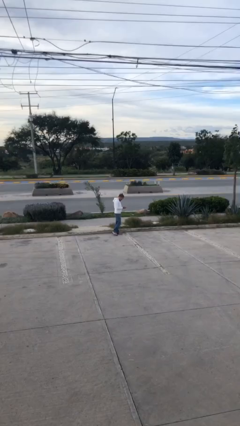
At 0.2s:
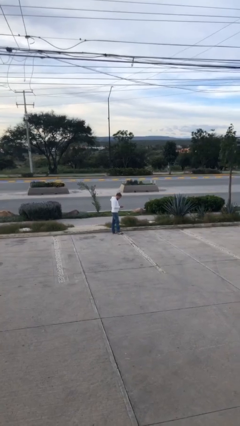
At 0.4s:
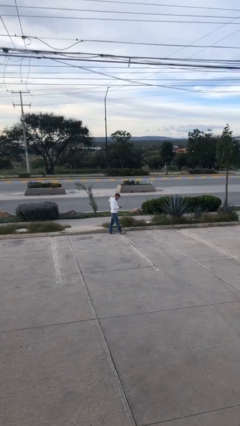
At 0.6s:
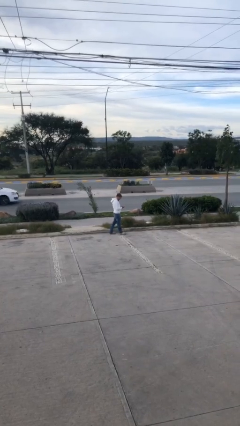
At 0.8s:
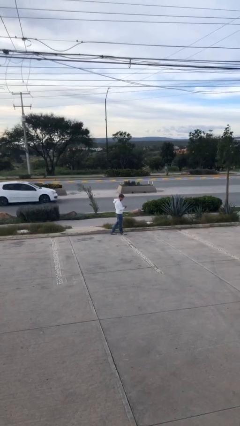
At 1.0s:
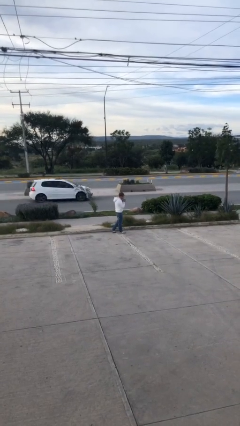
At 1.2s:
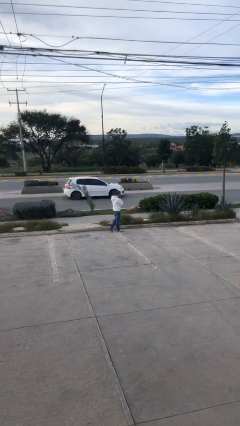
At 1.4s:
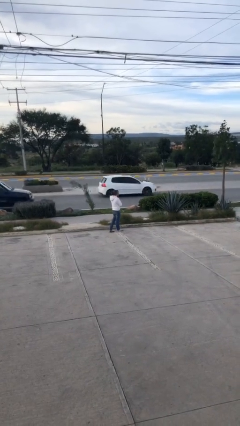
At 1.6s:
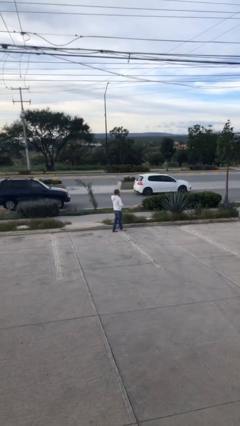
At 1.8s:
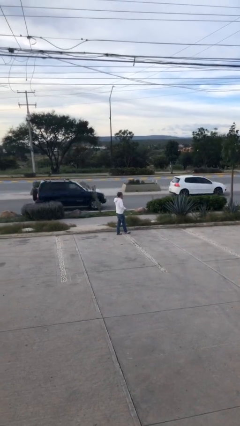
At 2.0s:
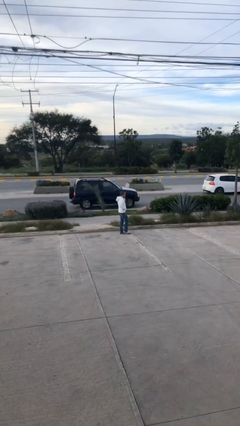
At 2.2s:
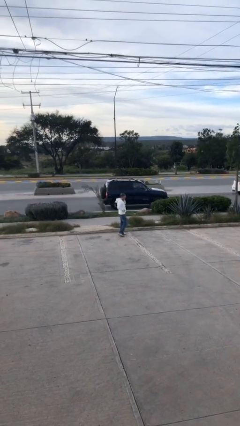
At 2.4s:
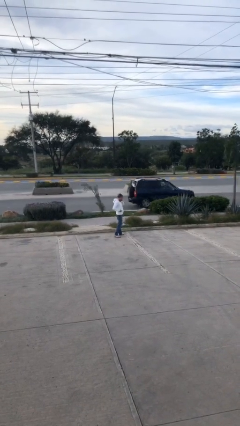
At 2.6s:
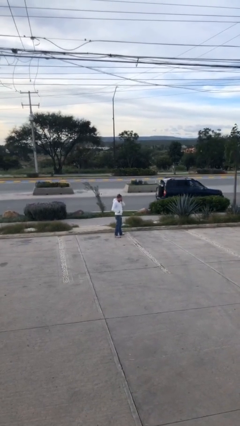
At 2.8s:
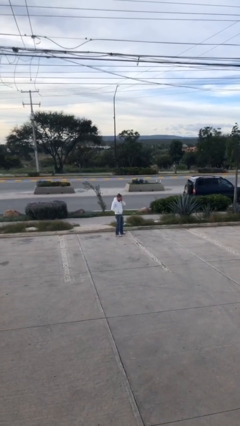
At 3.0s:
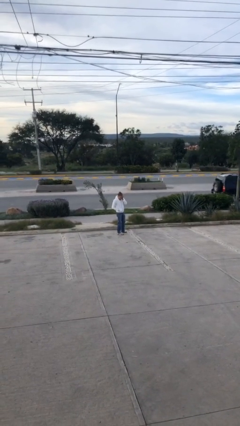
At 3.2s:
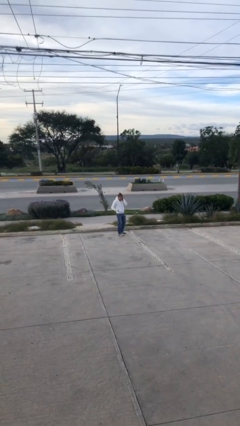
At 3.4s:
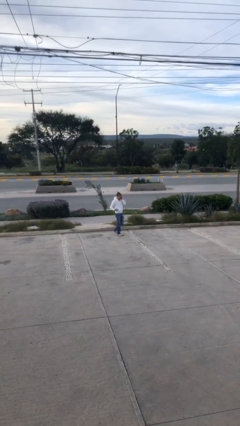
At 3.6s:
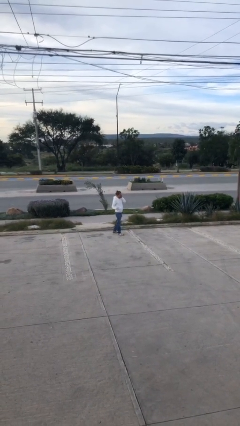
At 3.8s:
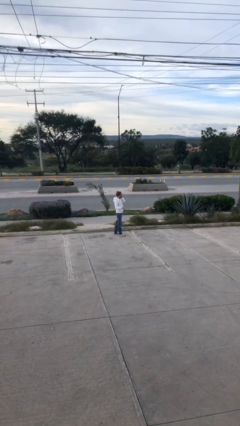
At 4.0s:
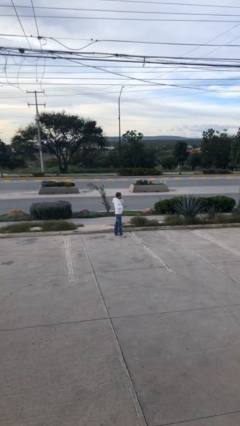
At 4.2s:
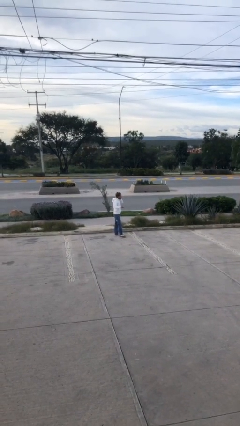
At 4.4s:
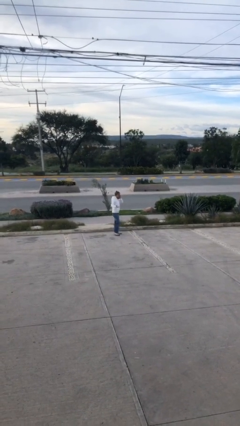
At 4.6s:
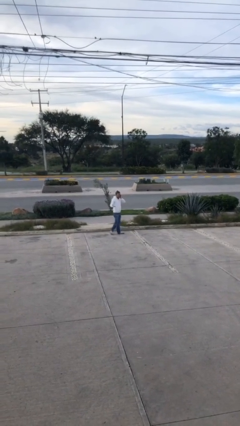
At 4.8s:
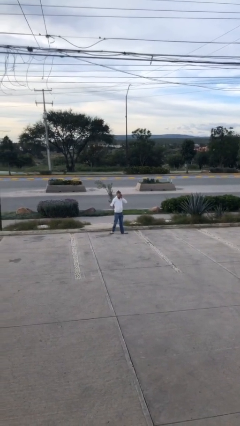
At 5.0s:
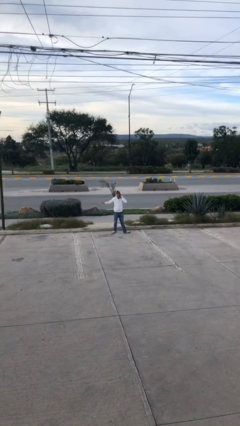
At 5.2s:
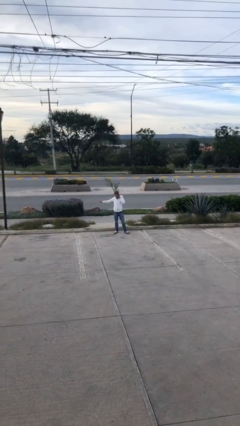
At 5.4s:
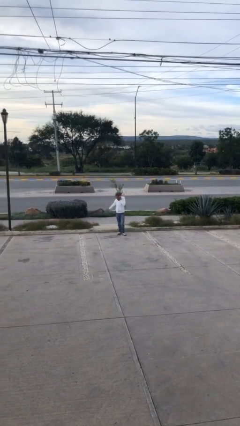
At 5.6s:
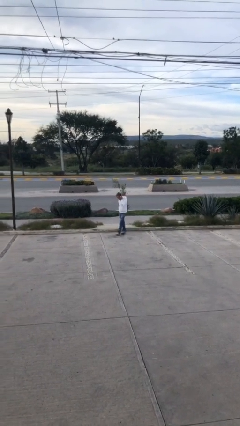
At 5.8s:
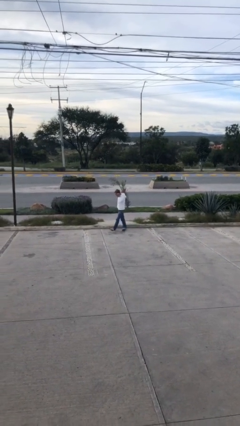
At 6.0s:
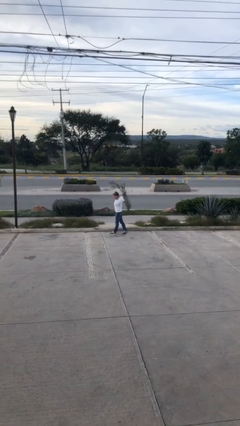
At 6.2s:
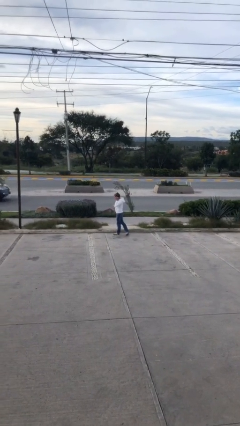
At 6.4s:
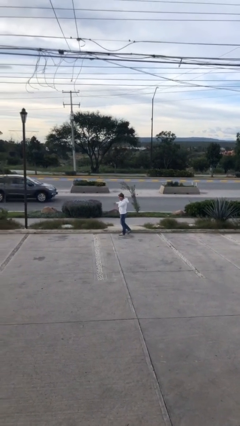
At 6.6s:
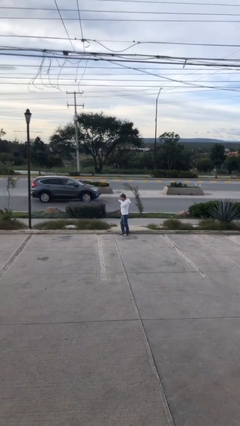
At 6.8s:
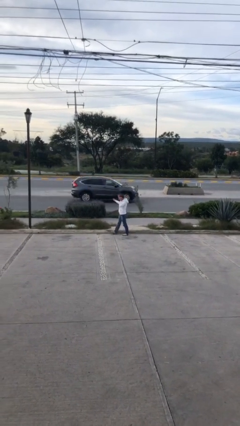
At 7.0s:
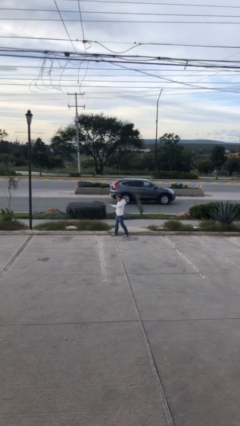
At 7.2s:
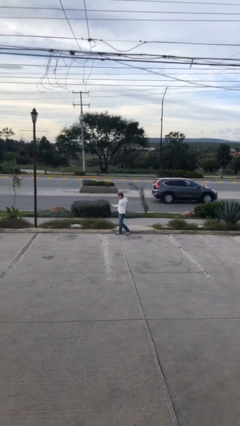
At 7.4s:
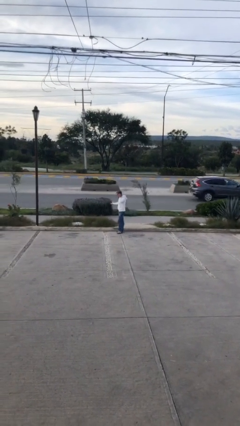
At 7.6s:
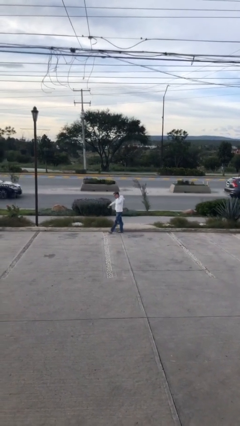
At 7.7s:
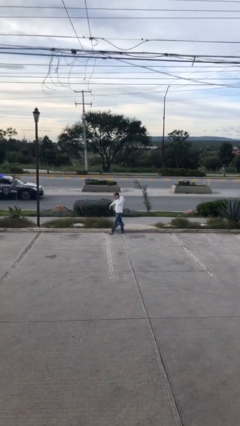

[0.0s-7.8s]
person talks on phone

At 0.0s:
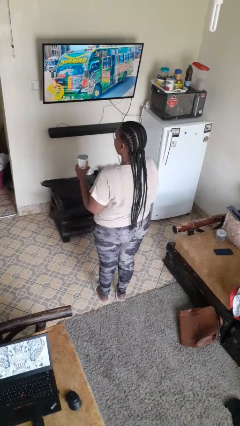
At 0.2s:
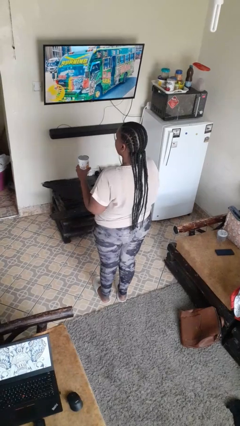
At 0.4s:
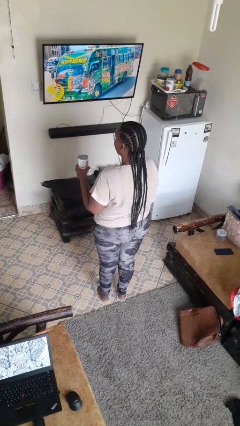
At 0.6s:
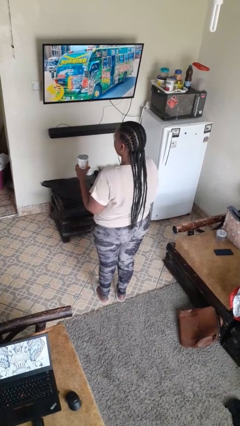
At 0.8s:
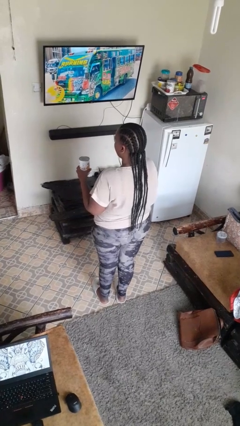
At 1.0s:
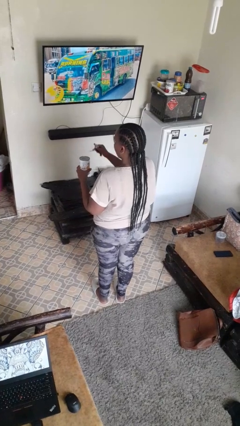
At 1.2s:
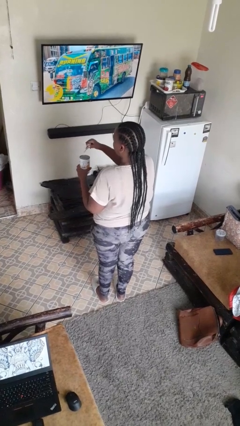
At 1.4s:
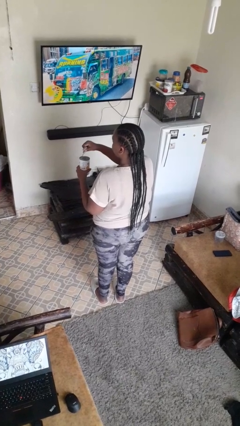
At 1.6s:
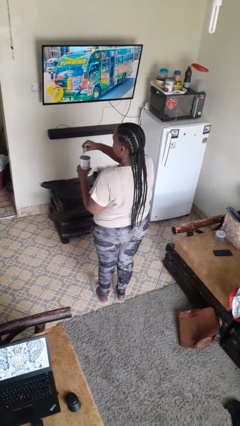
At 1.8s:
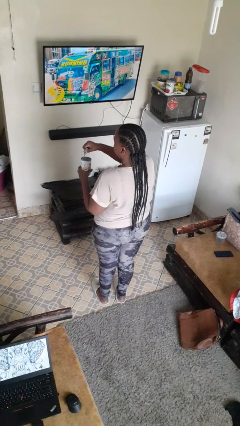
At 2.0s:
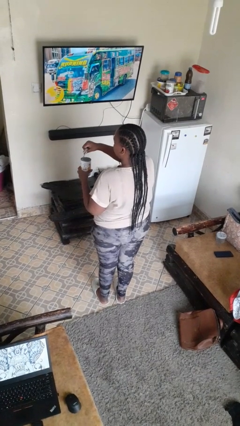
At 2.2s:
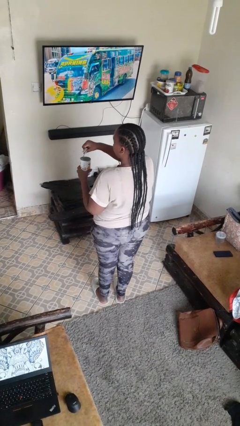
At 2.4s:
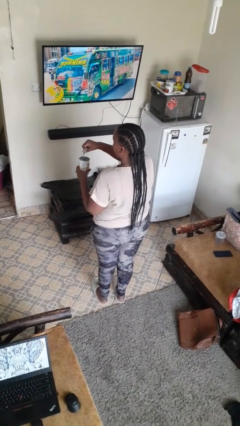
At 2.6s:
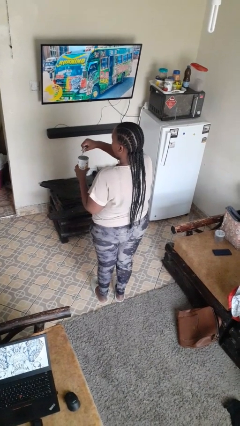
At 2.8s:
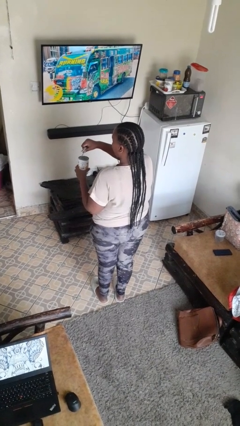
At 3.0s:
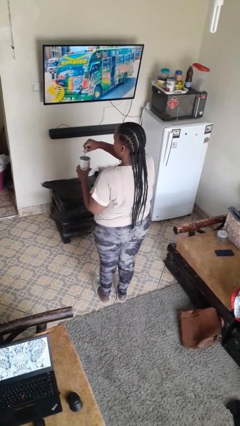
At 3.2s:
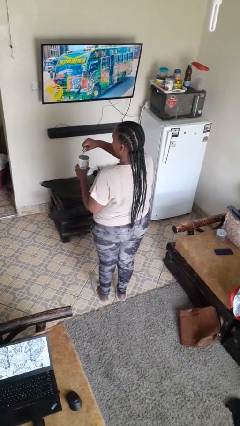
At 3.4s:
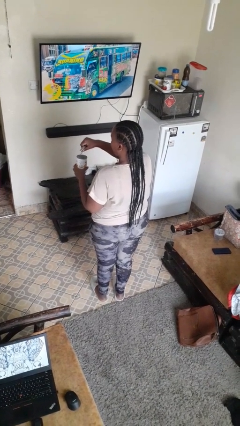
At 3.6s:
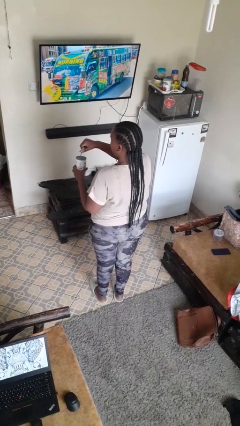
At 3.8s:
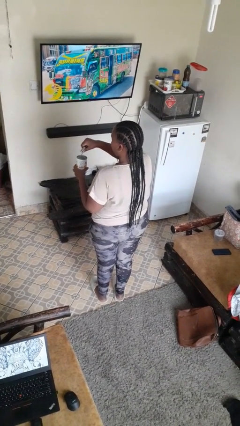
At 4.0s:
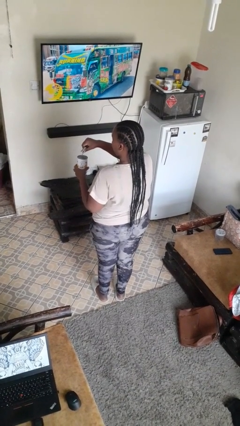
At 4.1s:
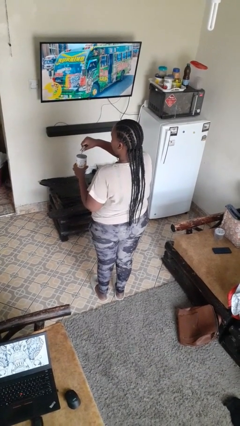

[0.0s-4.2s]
person opens can with can opener

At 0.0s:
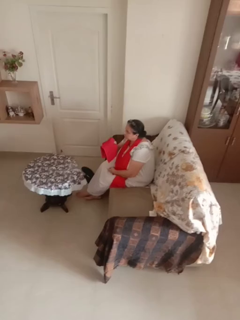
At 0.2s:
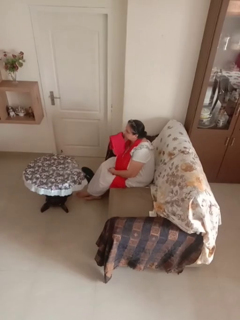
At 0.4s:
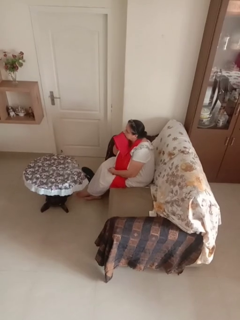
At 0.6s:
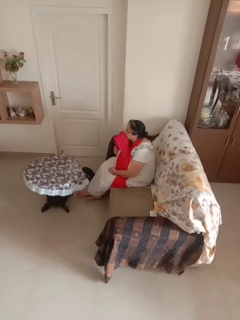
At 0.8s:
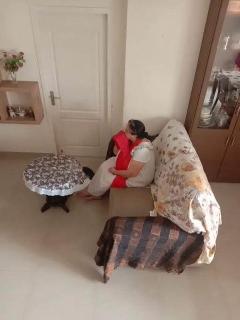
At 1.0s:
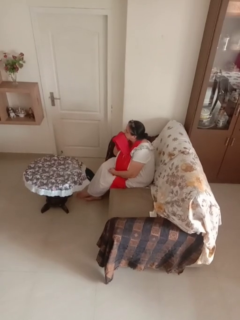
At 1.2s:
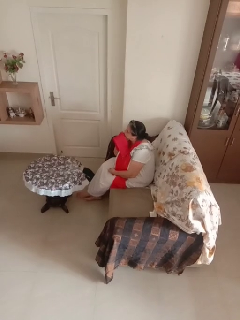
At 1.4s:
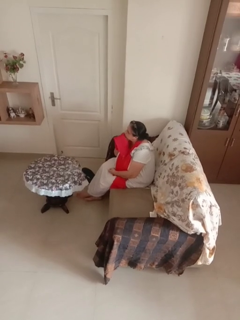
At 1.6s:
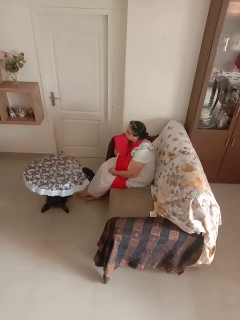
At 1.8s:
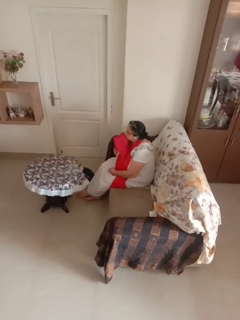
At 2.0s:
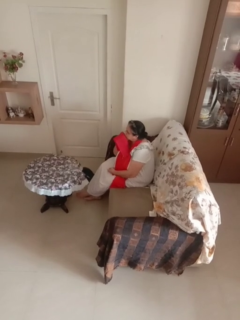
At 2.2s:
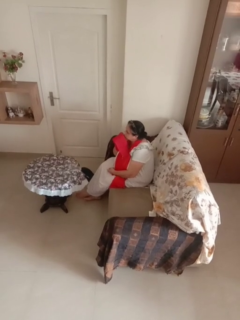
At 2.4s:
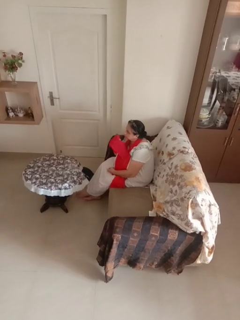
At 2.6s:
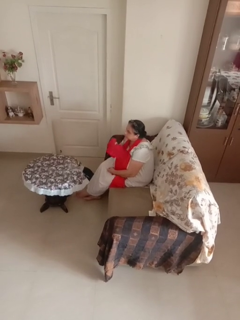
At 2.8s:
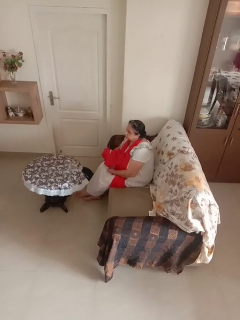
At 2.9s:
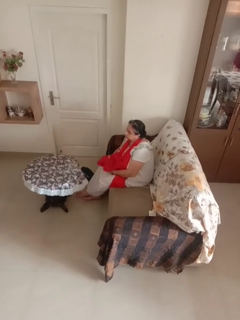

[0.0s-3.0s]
person wipes mouth with napkin

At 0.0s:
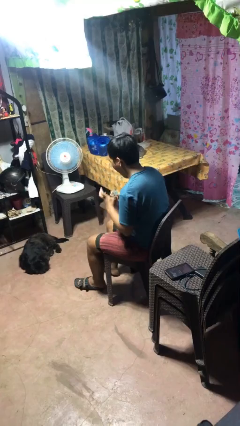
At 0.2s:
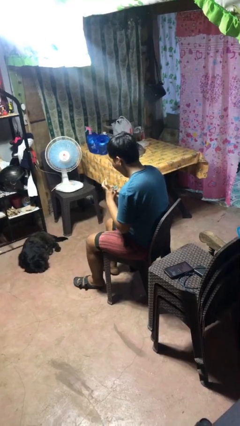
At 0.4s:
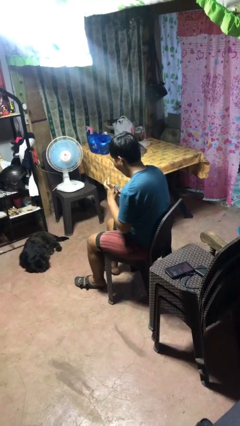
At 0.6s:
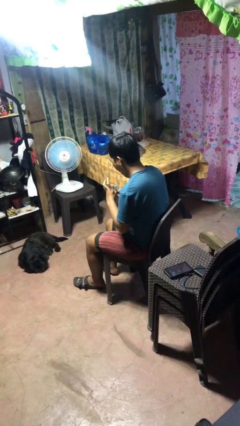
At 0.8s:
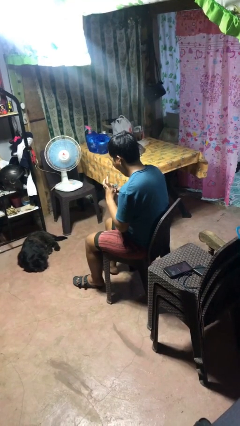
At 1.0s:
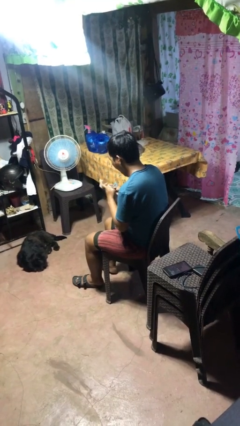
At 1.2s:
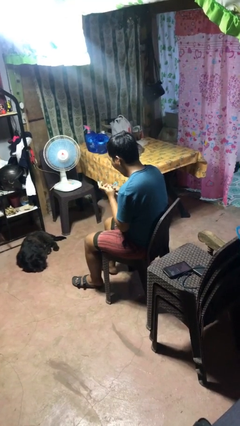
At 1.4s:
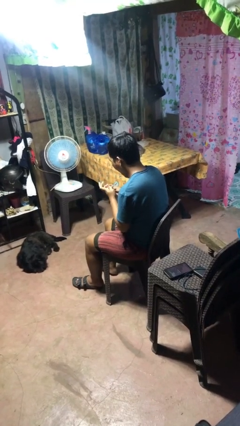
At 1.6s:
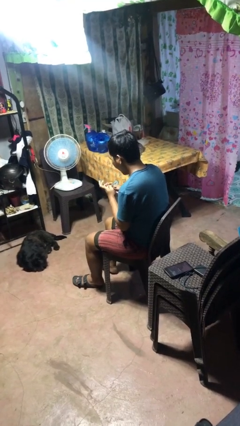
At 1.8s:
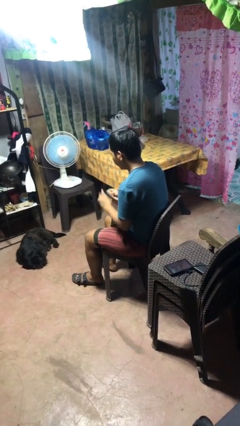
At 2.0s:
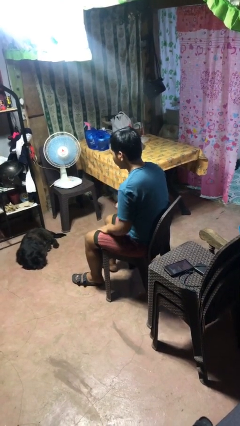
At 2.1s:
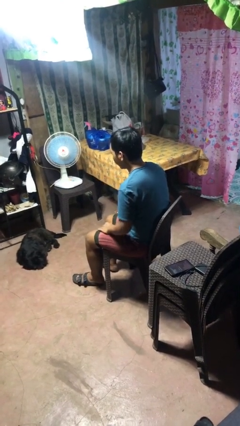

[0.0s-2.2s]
person files fingernails

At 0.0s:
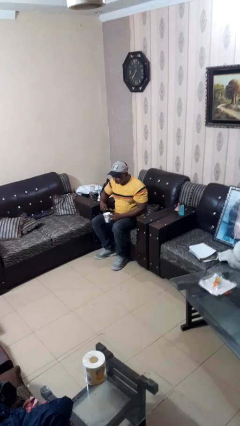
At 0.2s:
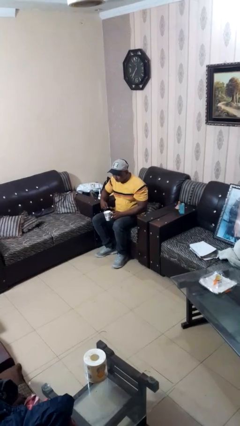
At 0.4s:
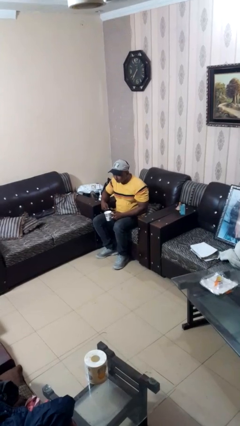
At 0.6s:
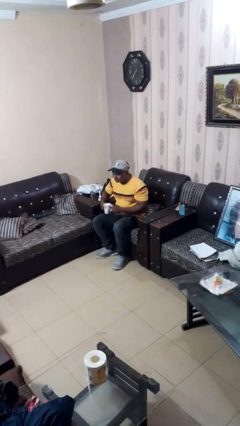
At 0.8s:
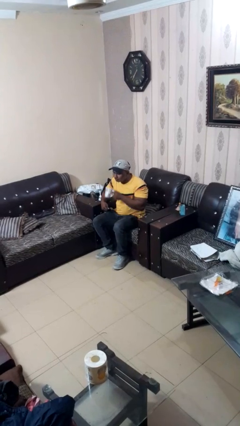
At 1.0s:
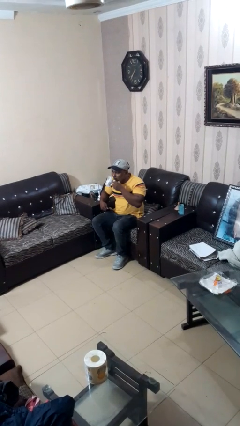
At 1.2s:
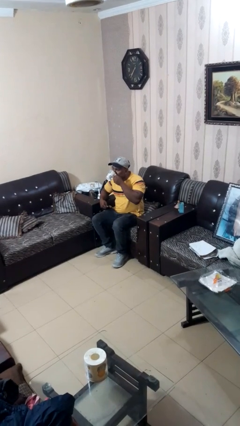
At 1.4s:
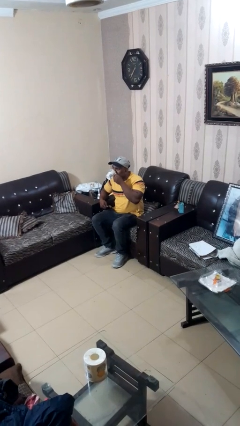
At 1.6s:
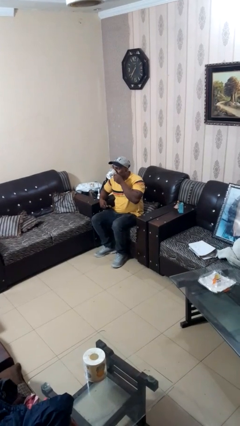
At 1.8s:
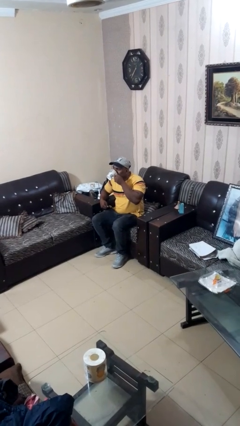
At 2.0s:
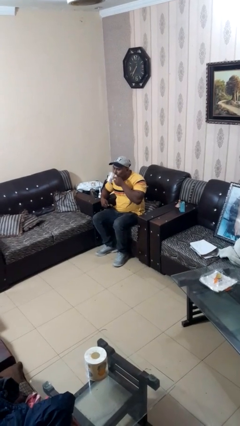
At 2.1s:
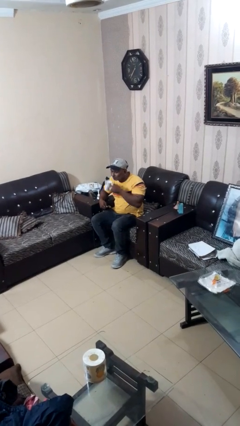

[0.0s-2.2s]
person drinks from mug
